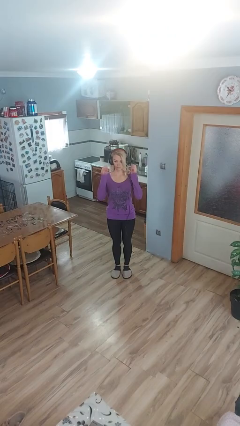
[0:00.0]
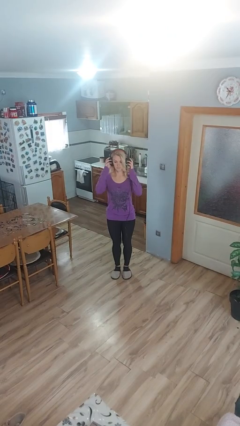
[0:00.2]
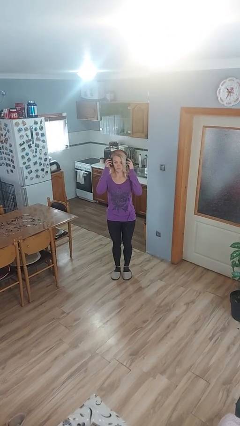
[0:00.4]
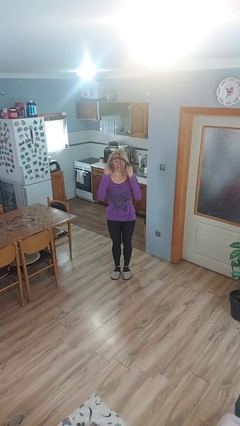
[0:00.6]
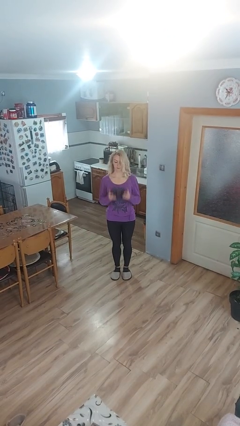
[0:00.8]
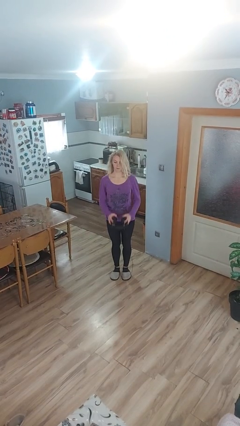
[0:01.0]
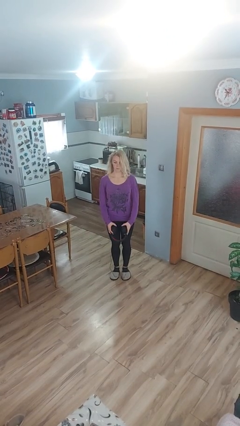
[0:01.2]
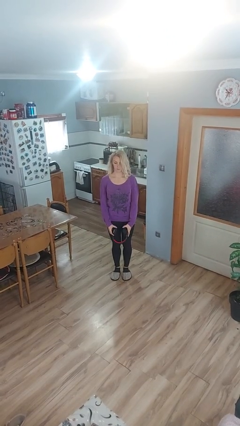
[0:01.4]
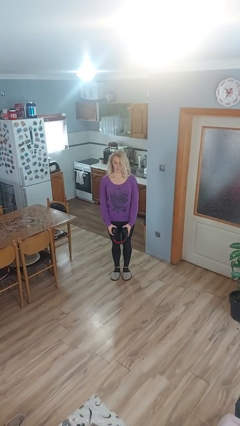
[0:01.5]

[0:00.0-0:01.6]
person takes off headphones

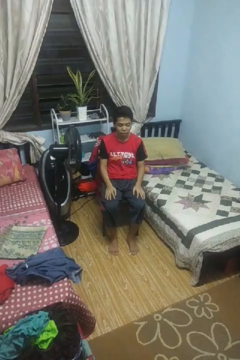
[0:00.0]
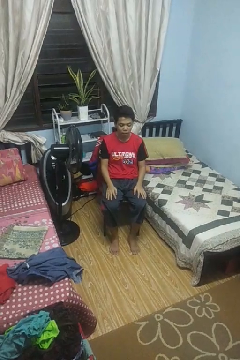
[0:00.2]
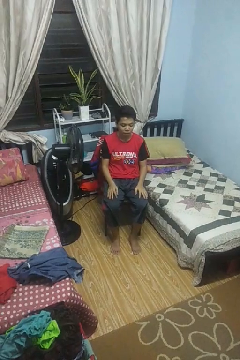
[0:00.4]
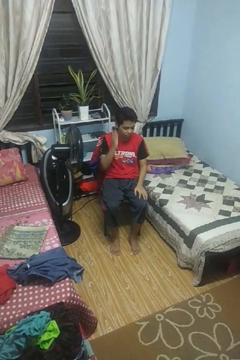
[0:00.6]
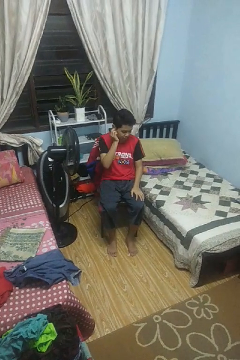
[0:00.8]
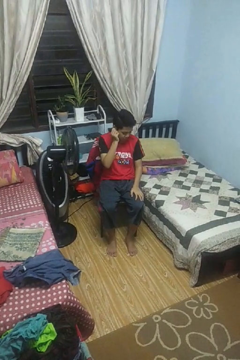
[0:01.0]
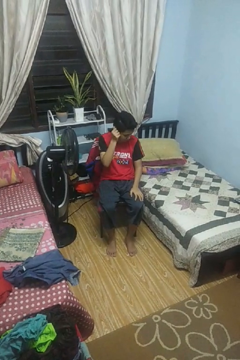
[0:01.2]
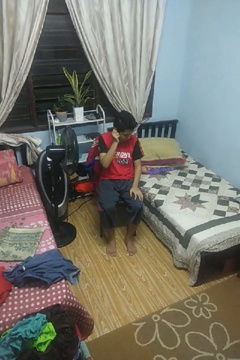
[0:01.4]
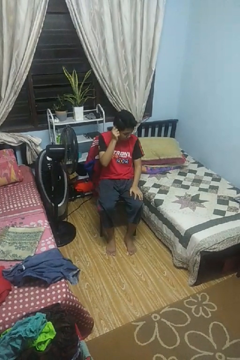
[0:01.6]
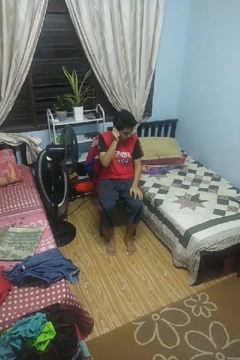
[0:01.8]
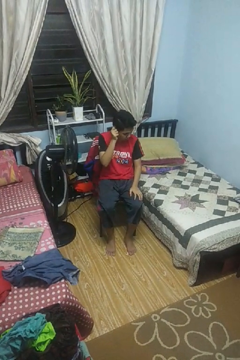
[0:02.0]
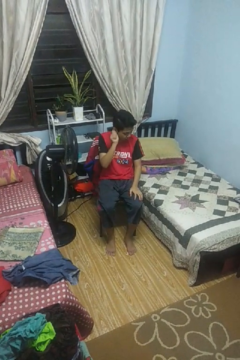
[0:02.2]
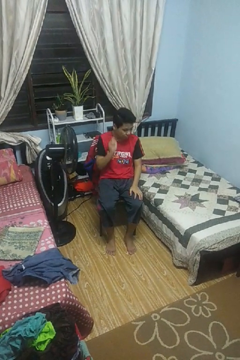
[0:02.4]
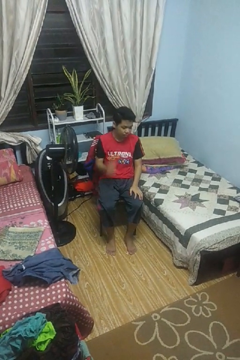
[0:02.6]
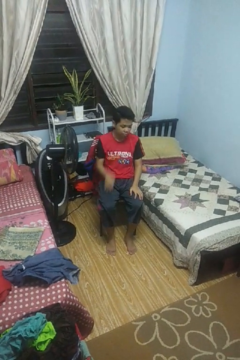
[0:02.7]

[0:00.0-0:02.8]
person touches earlobe

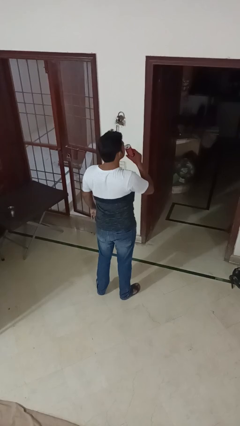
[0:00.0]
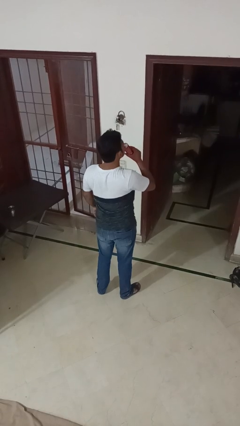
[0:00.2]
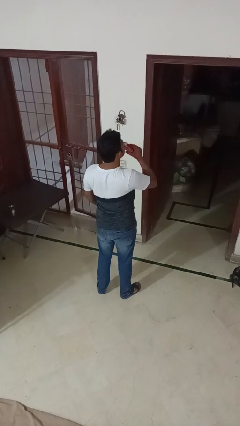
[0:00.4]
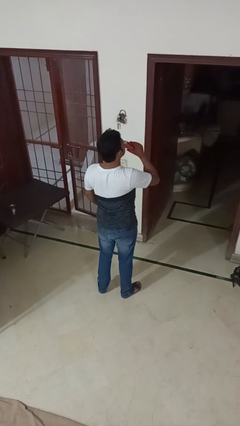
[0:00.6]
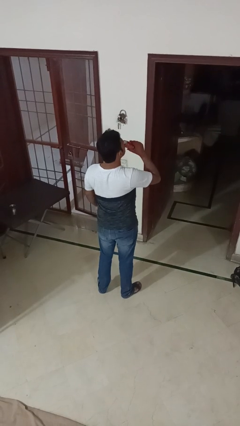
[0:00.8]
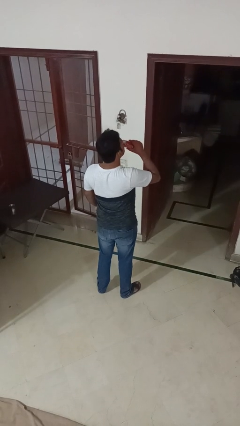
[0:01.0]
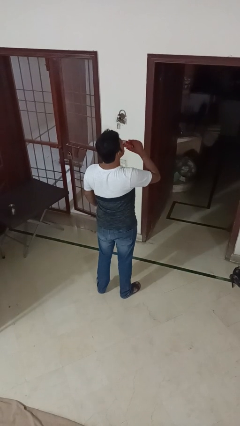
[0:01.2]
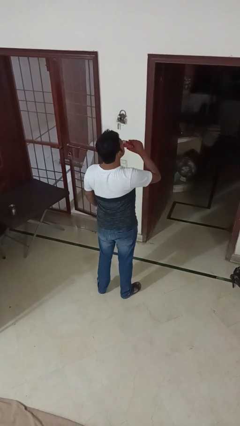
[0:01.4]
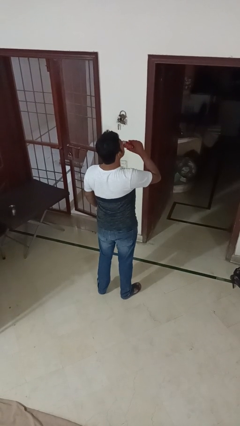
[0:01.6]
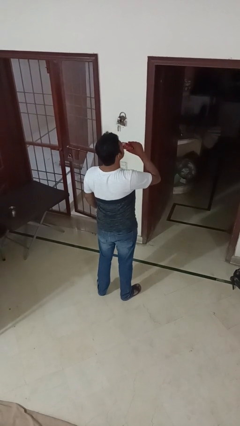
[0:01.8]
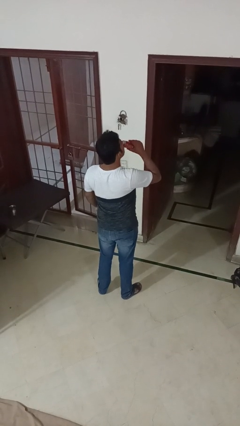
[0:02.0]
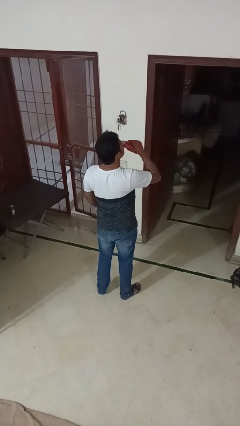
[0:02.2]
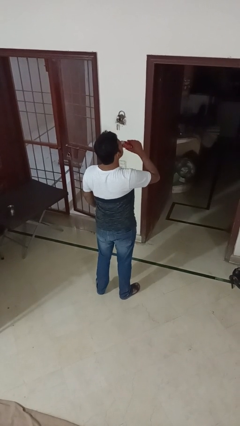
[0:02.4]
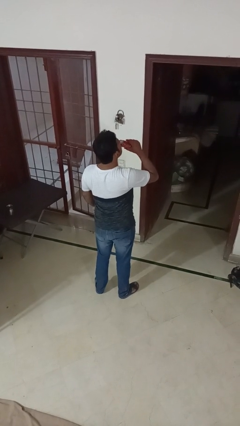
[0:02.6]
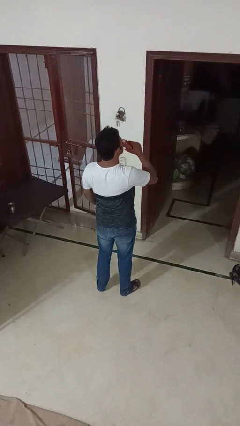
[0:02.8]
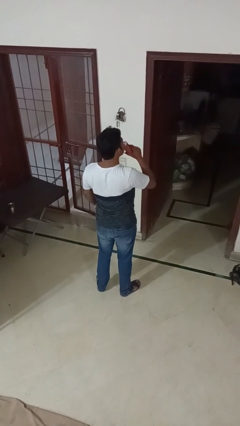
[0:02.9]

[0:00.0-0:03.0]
person drinks from beverage can

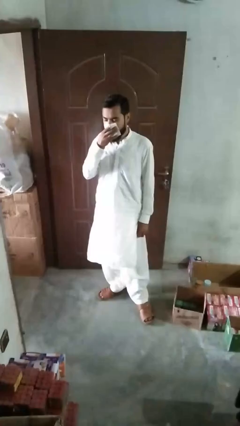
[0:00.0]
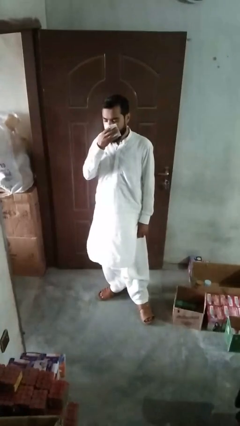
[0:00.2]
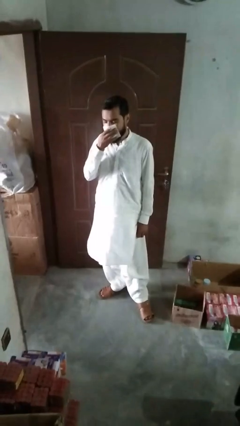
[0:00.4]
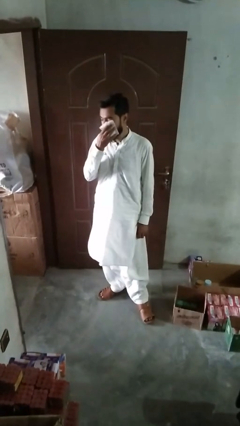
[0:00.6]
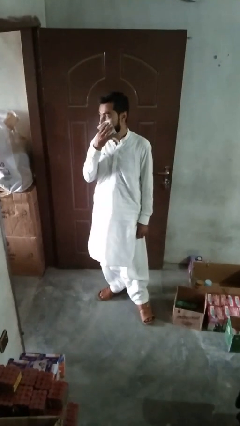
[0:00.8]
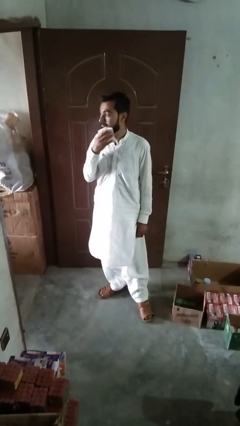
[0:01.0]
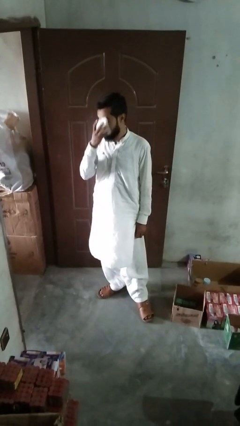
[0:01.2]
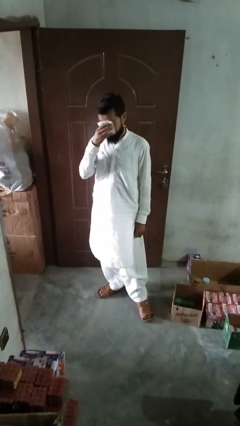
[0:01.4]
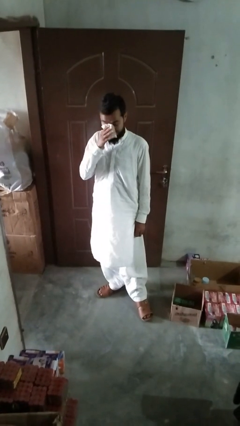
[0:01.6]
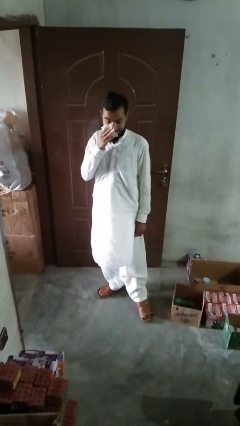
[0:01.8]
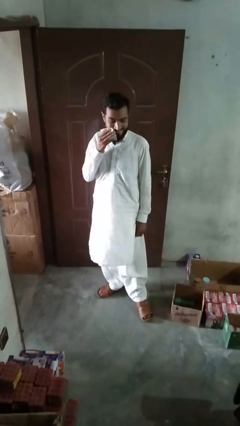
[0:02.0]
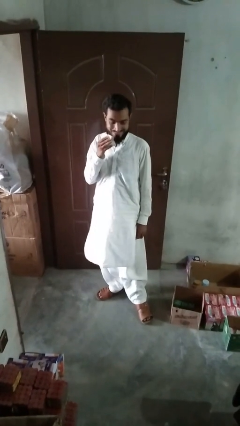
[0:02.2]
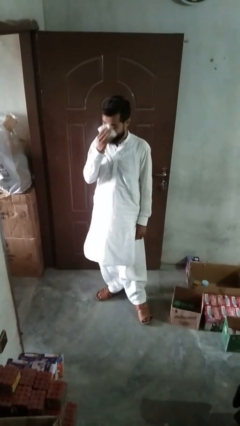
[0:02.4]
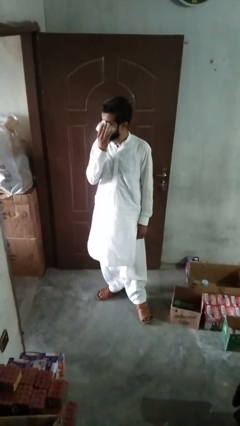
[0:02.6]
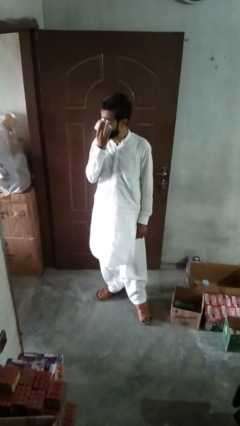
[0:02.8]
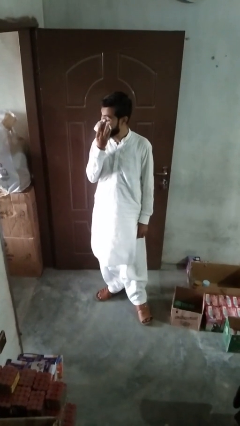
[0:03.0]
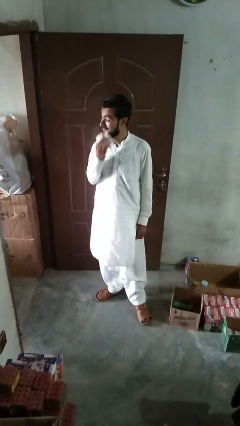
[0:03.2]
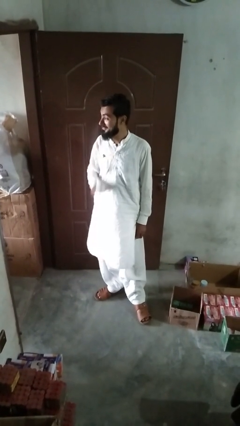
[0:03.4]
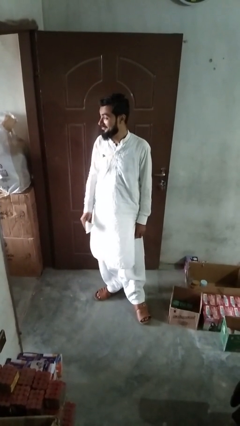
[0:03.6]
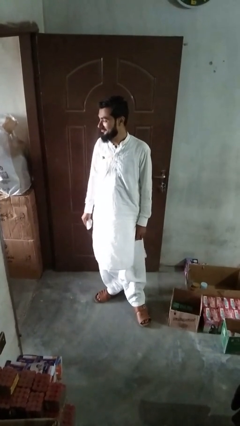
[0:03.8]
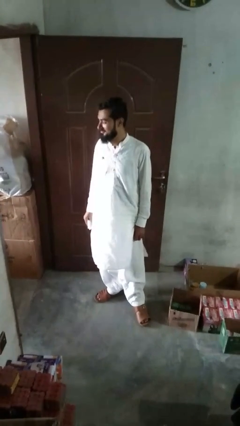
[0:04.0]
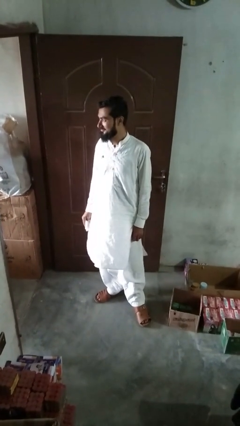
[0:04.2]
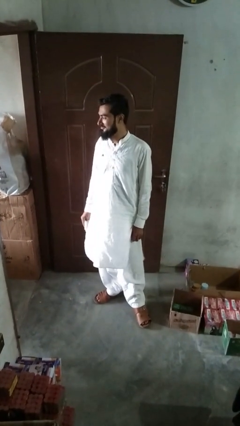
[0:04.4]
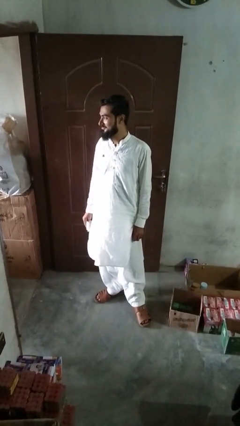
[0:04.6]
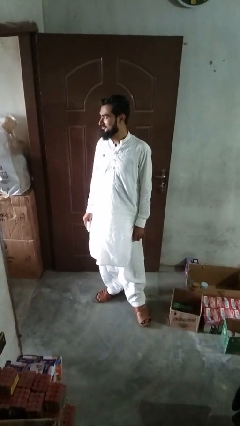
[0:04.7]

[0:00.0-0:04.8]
person wipes mouth with napkin

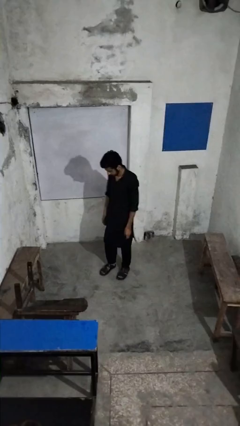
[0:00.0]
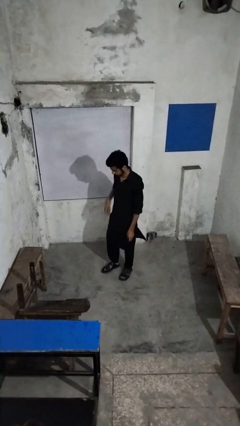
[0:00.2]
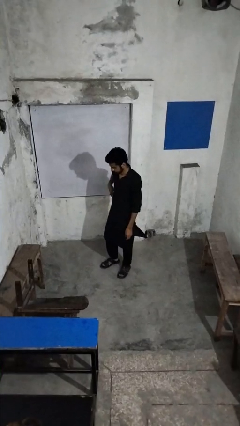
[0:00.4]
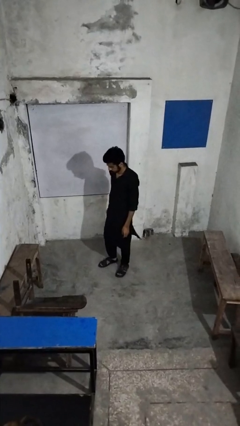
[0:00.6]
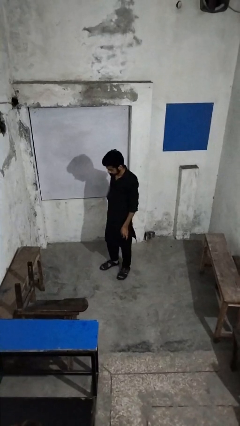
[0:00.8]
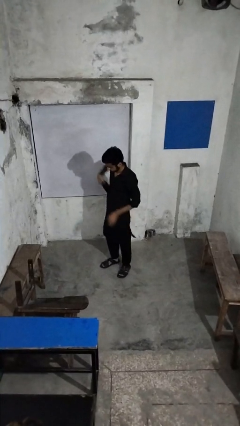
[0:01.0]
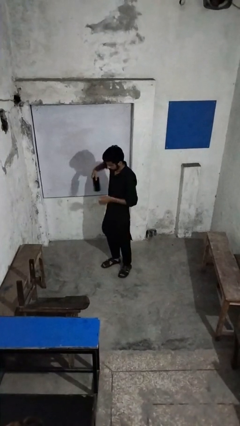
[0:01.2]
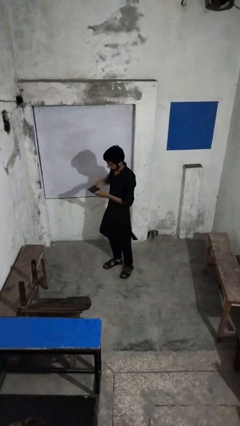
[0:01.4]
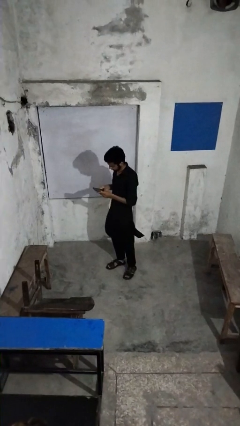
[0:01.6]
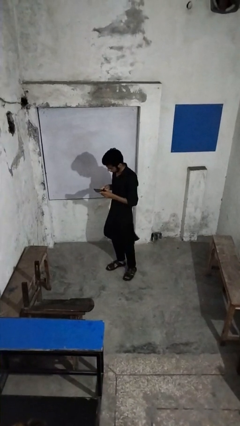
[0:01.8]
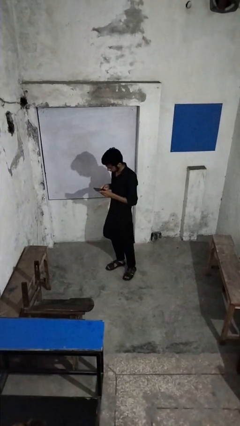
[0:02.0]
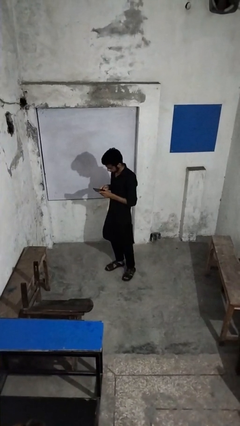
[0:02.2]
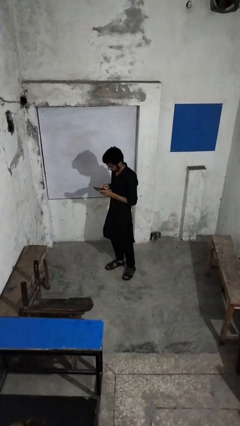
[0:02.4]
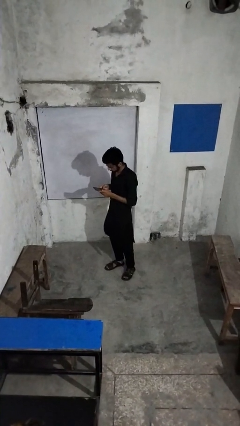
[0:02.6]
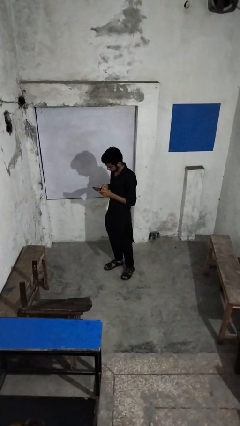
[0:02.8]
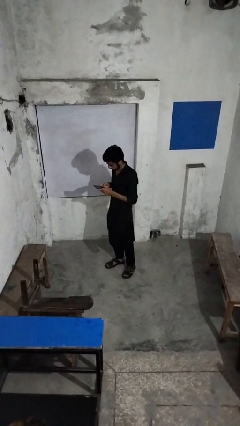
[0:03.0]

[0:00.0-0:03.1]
person takes phone from pocket

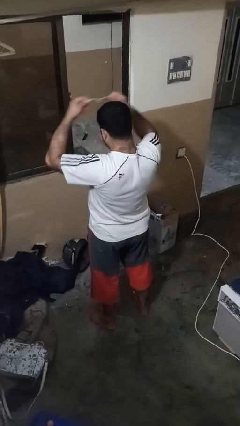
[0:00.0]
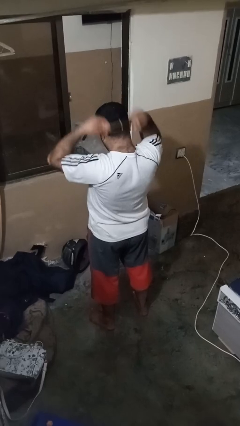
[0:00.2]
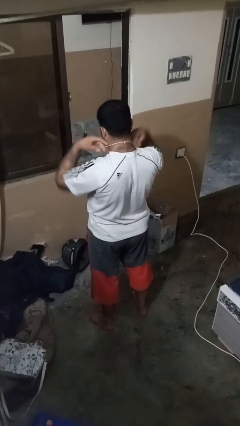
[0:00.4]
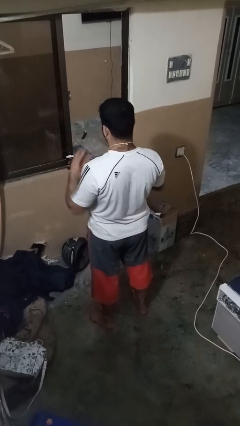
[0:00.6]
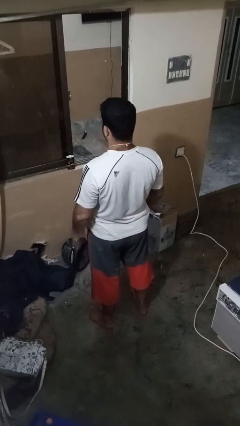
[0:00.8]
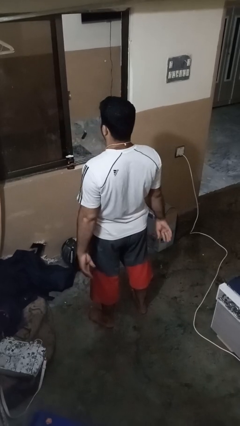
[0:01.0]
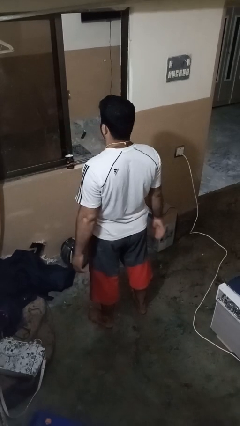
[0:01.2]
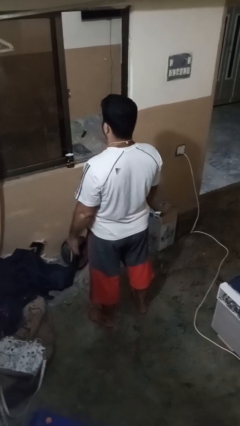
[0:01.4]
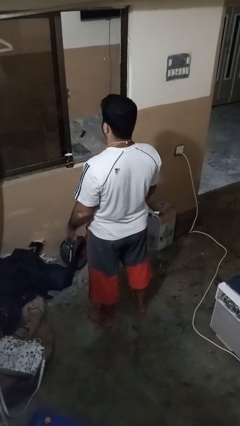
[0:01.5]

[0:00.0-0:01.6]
person puts on necklace

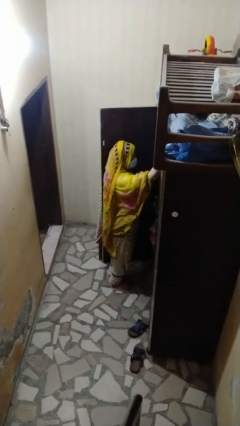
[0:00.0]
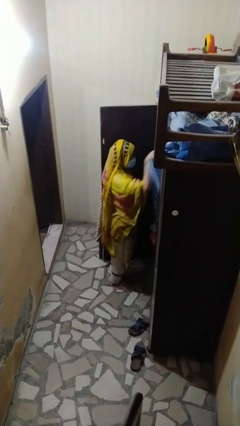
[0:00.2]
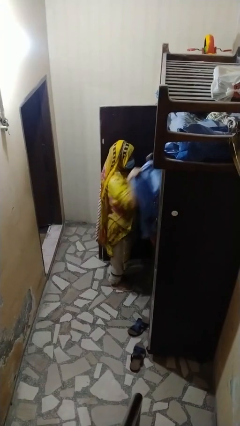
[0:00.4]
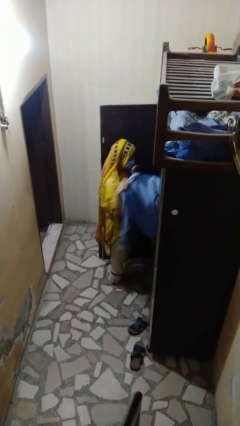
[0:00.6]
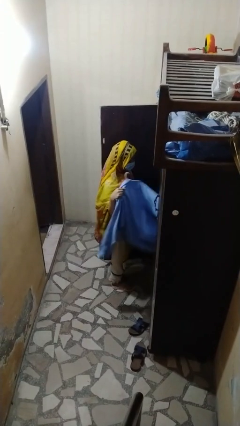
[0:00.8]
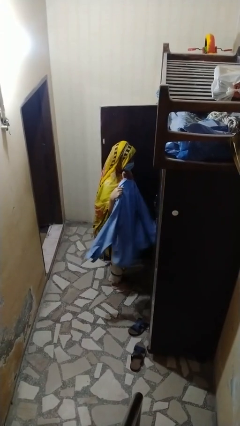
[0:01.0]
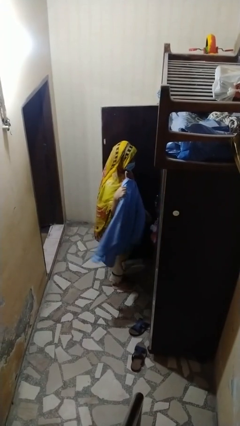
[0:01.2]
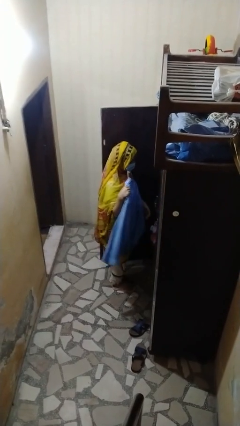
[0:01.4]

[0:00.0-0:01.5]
person takes clothes from closet
